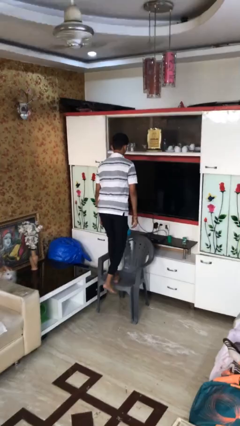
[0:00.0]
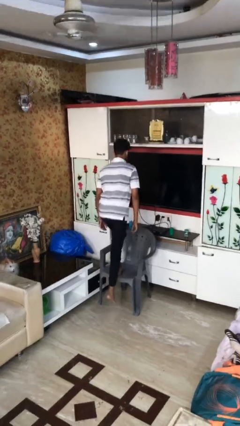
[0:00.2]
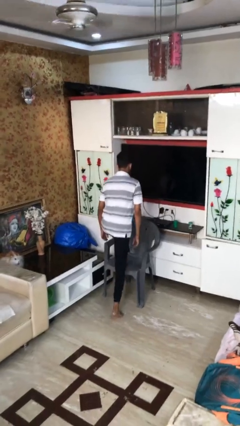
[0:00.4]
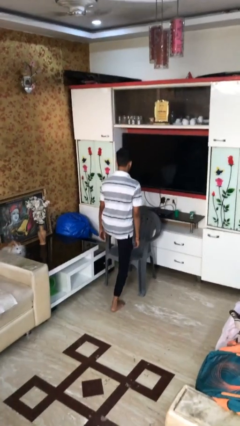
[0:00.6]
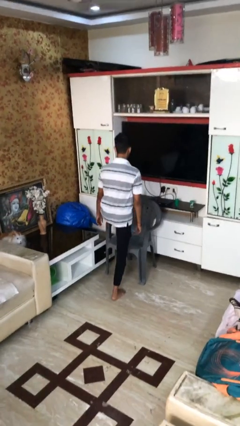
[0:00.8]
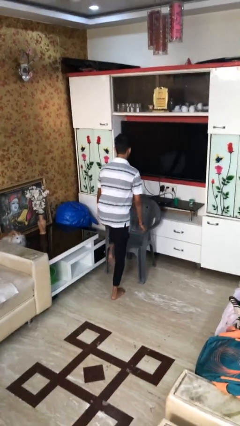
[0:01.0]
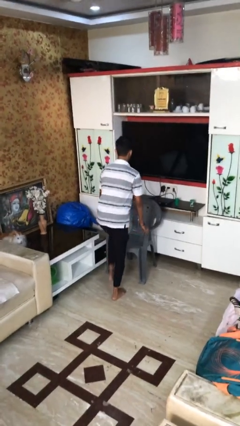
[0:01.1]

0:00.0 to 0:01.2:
person climbs off chair

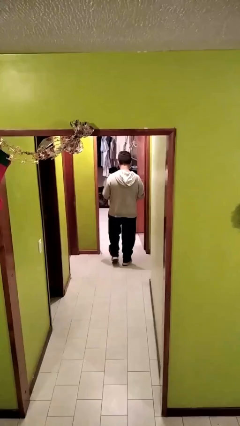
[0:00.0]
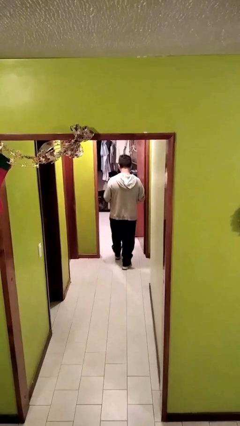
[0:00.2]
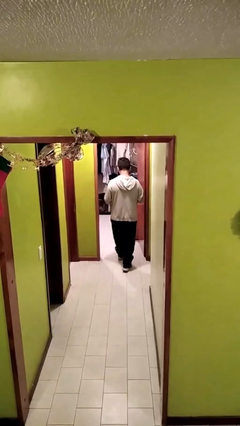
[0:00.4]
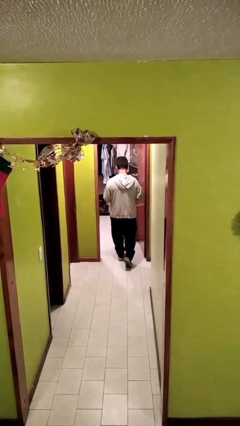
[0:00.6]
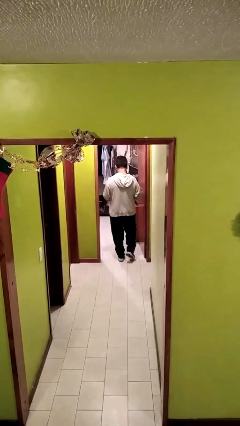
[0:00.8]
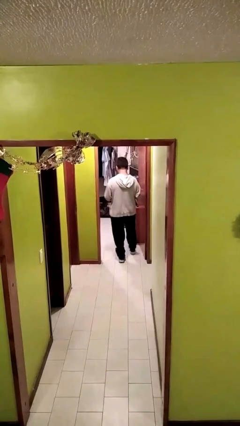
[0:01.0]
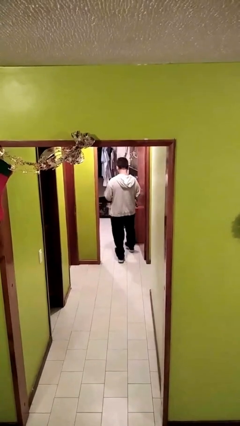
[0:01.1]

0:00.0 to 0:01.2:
person exits scene through structure

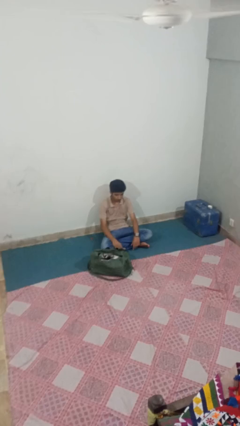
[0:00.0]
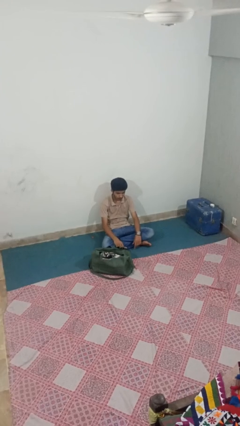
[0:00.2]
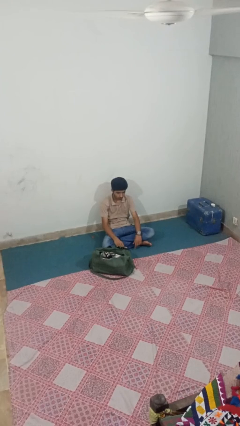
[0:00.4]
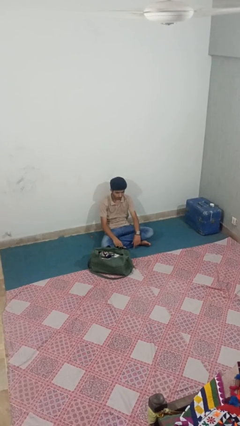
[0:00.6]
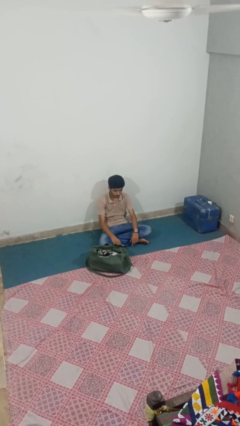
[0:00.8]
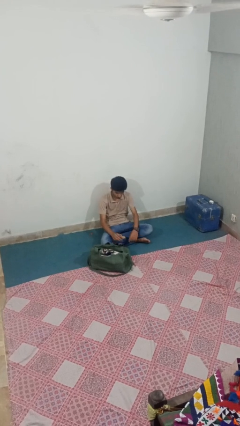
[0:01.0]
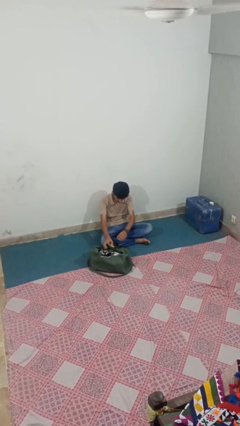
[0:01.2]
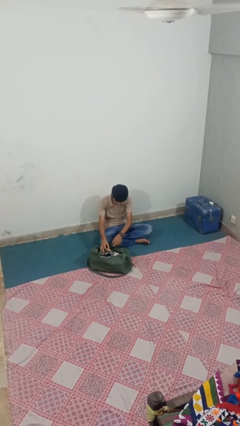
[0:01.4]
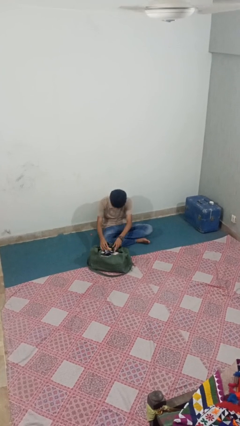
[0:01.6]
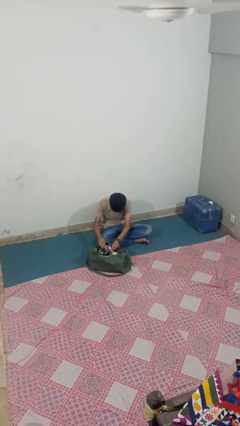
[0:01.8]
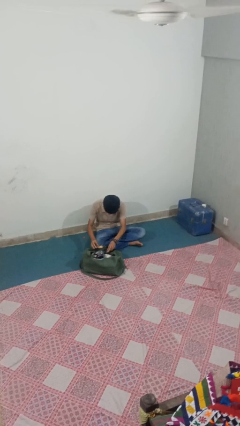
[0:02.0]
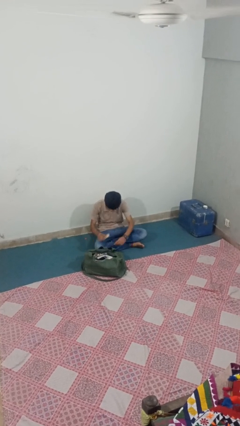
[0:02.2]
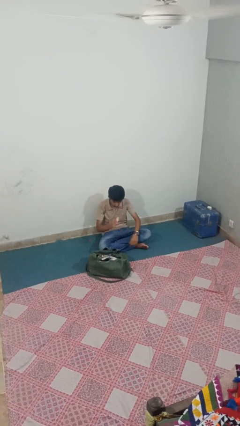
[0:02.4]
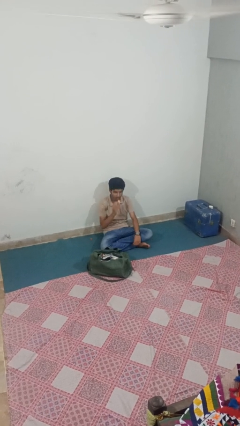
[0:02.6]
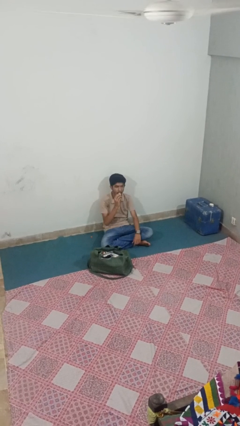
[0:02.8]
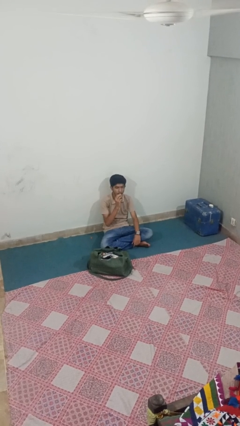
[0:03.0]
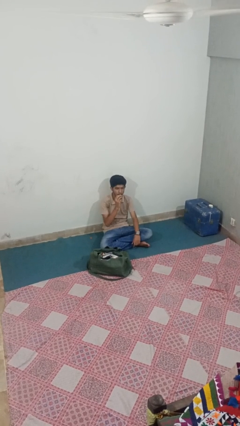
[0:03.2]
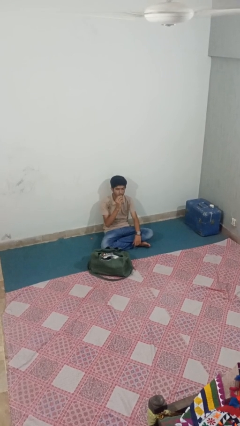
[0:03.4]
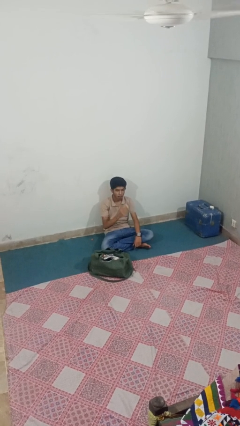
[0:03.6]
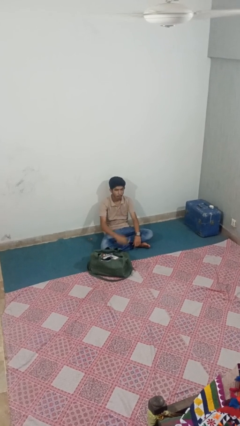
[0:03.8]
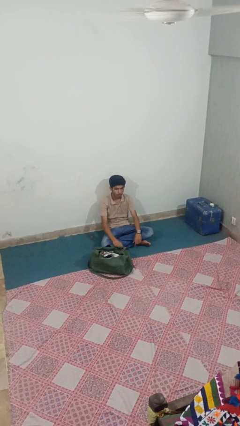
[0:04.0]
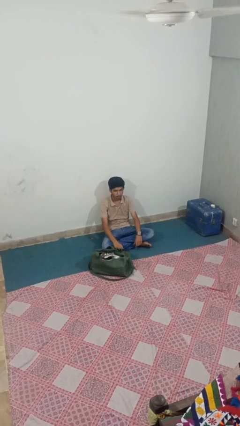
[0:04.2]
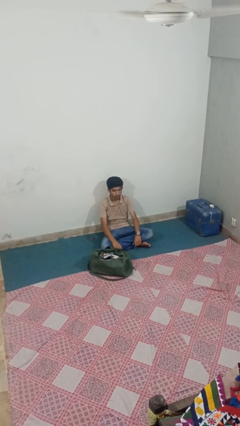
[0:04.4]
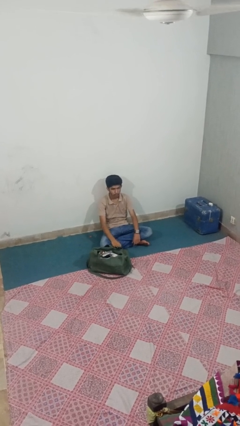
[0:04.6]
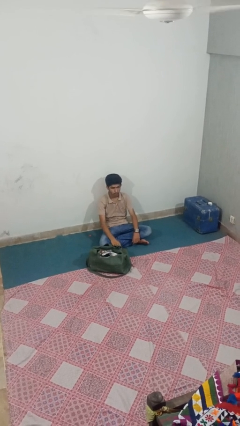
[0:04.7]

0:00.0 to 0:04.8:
person eats snack from bag

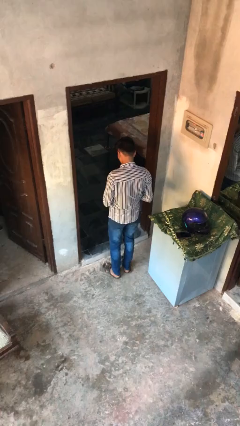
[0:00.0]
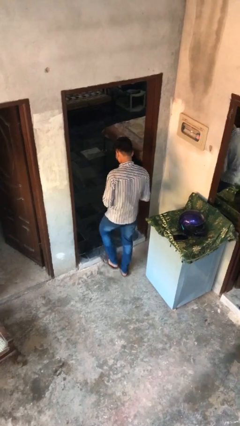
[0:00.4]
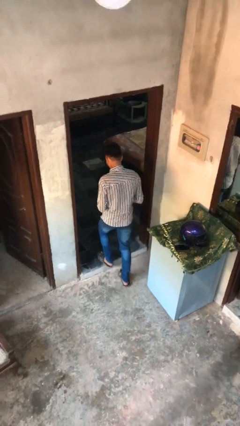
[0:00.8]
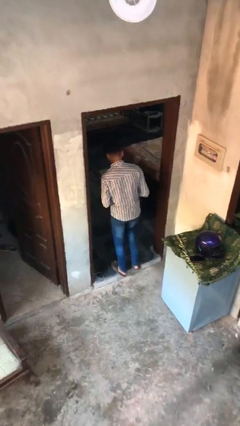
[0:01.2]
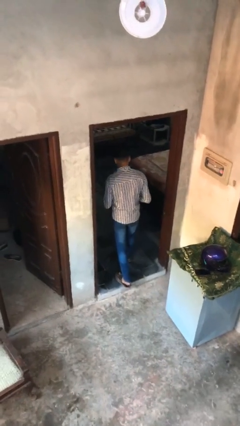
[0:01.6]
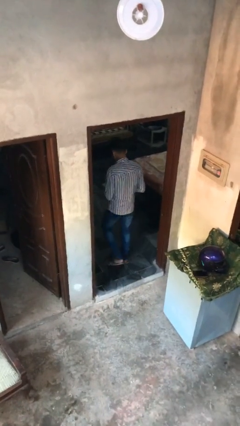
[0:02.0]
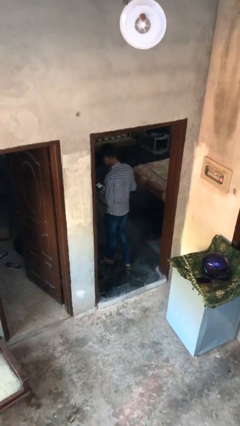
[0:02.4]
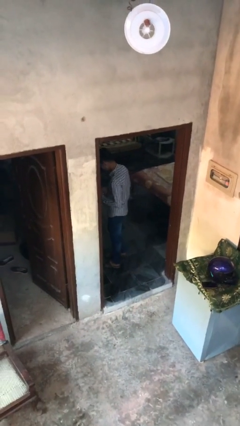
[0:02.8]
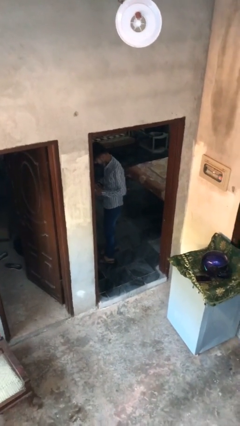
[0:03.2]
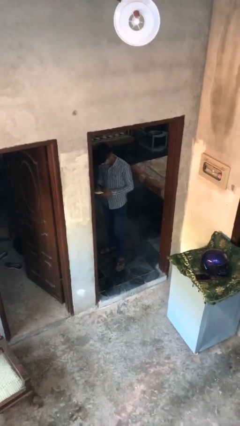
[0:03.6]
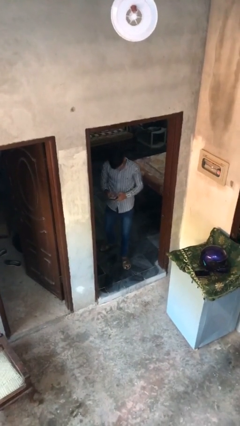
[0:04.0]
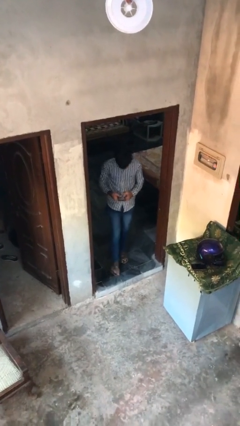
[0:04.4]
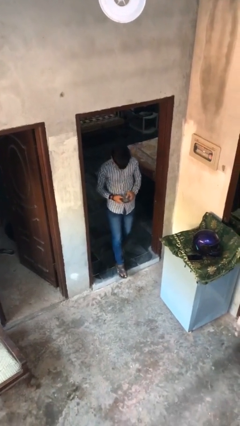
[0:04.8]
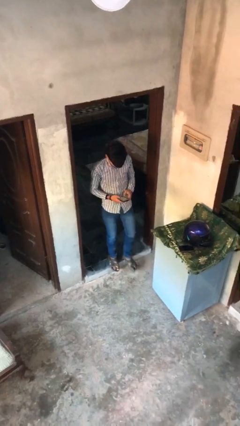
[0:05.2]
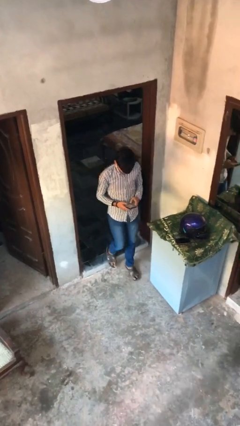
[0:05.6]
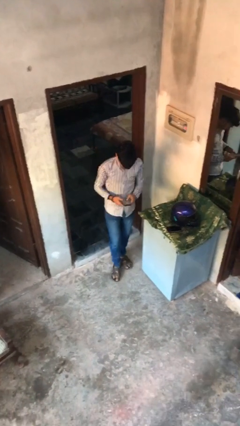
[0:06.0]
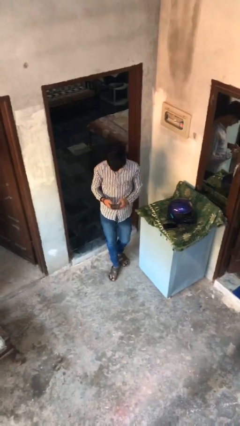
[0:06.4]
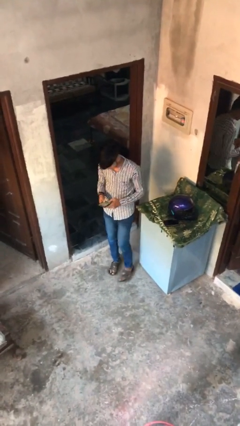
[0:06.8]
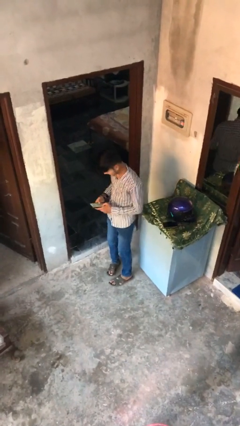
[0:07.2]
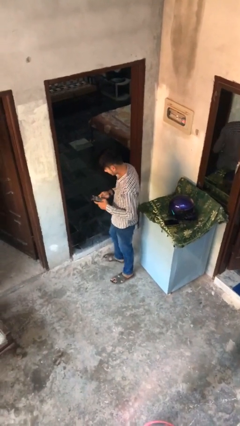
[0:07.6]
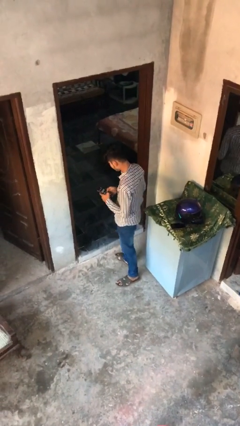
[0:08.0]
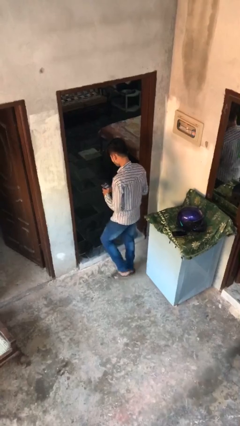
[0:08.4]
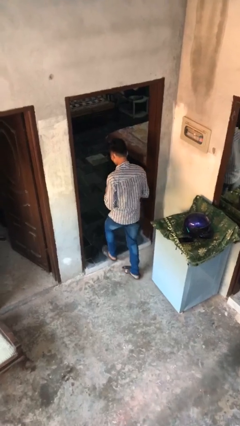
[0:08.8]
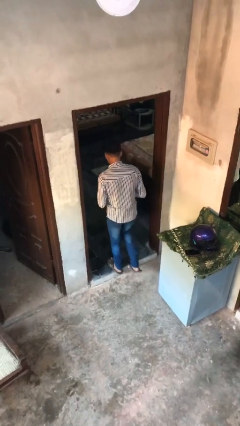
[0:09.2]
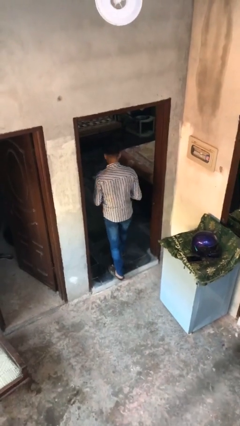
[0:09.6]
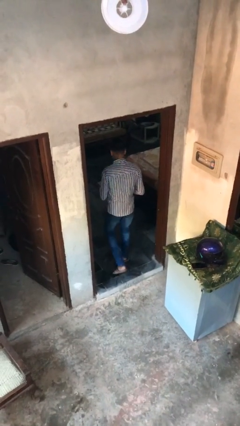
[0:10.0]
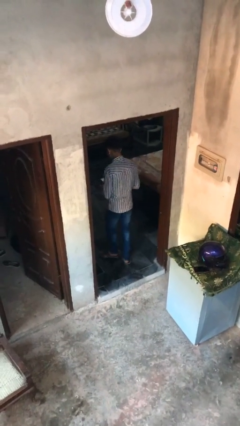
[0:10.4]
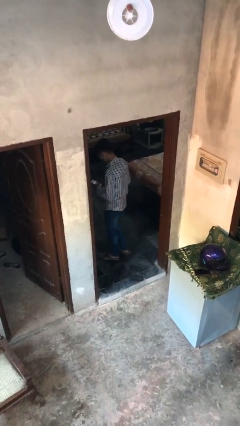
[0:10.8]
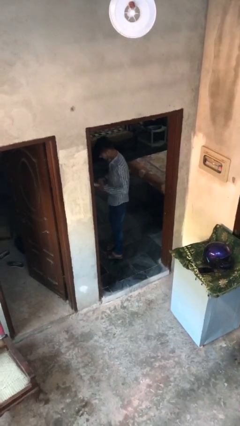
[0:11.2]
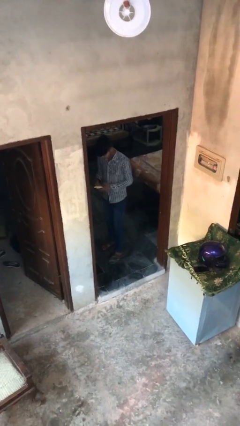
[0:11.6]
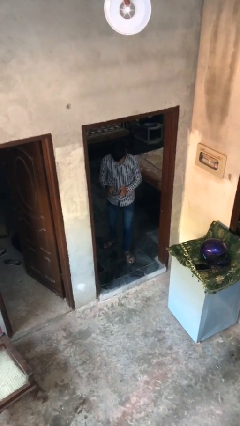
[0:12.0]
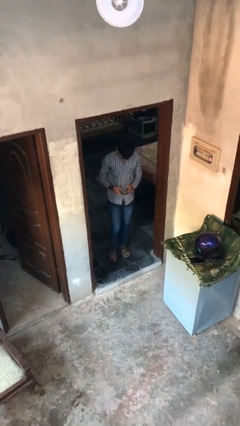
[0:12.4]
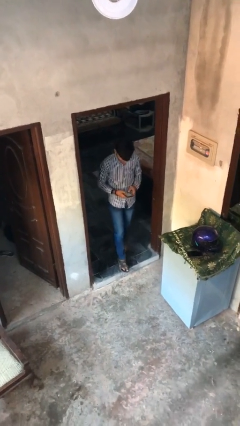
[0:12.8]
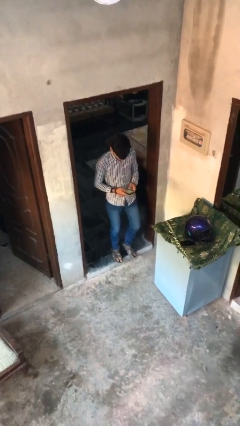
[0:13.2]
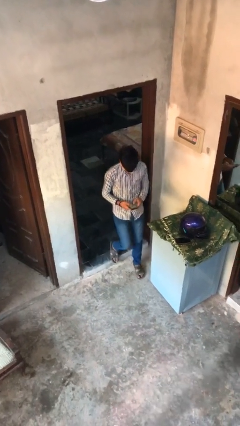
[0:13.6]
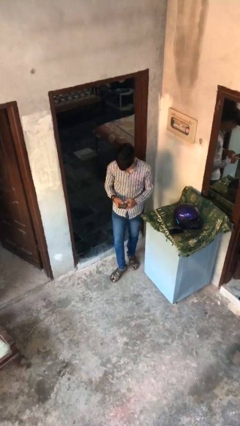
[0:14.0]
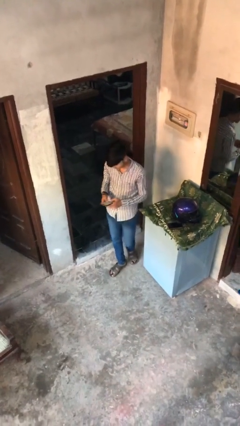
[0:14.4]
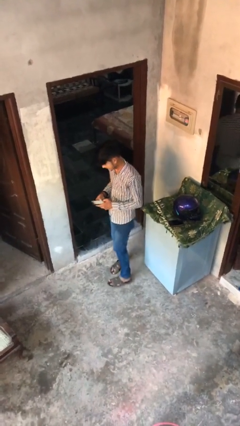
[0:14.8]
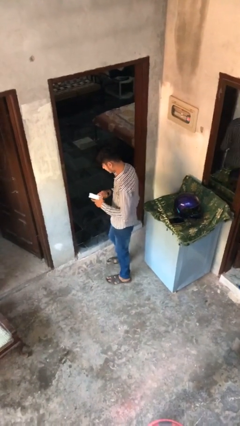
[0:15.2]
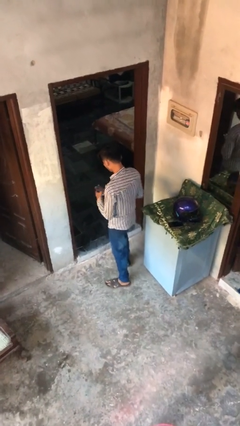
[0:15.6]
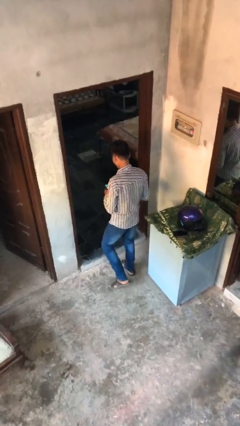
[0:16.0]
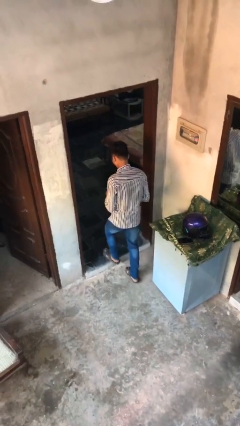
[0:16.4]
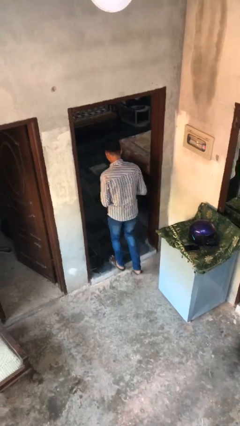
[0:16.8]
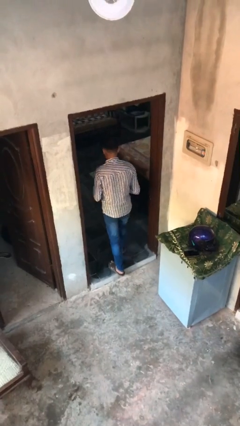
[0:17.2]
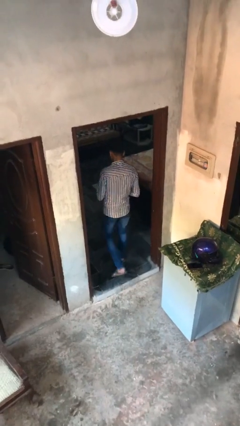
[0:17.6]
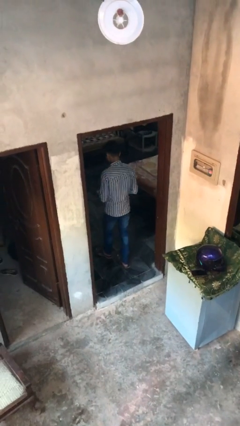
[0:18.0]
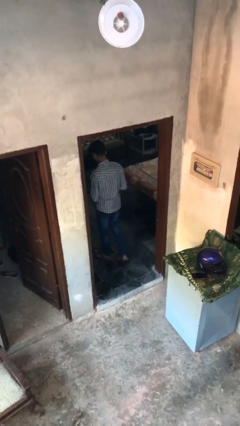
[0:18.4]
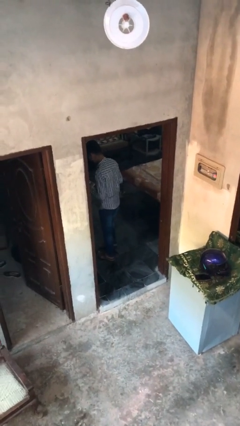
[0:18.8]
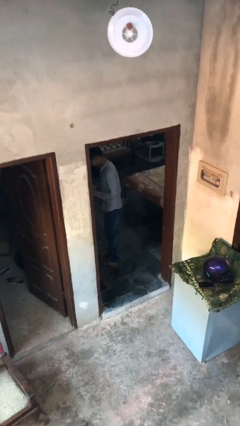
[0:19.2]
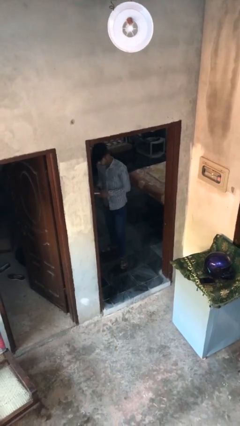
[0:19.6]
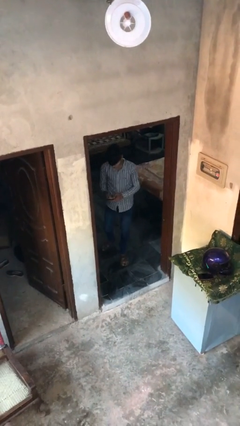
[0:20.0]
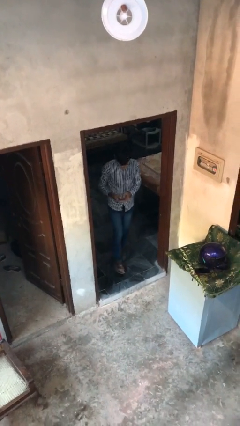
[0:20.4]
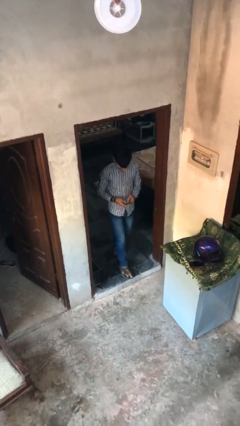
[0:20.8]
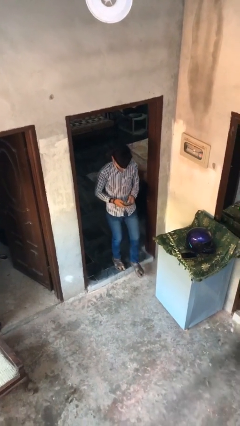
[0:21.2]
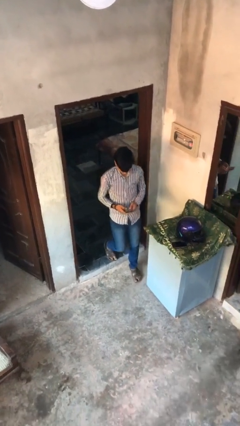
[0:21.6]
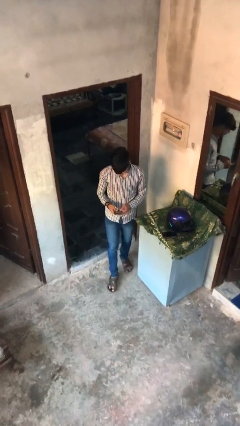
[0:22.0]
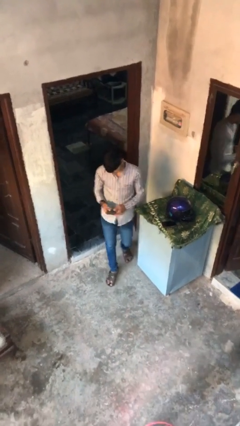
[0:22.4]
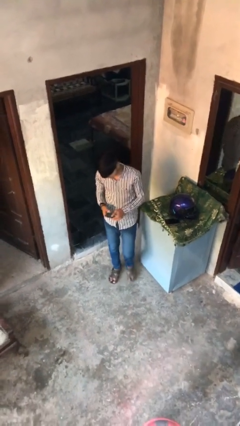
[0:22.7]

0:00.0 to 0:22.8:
person texts on phone
